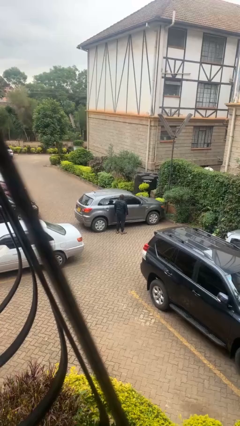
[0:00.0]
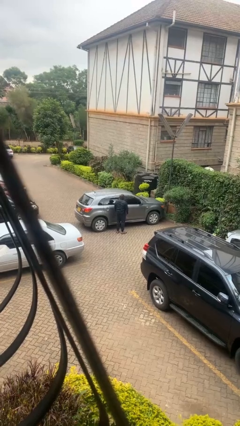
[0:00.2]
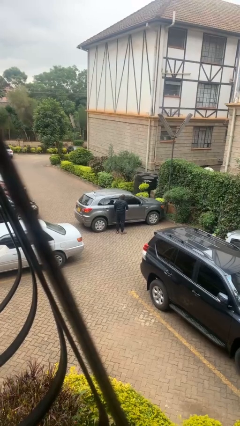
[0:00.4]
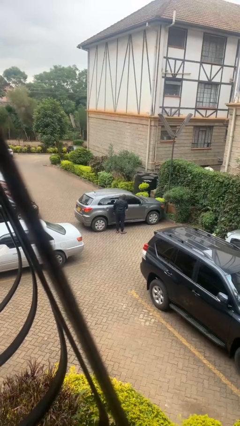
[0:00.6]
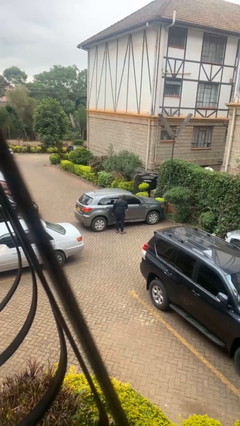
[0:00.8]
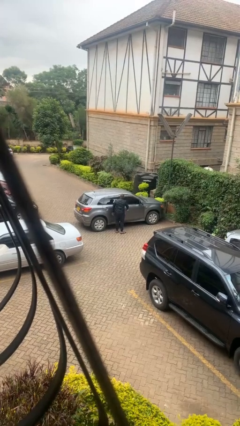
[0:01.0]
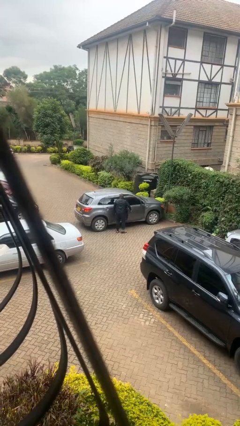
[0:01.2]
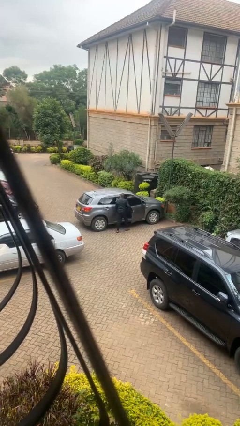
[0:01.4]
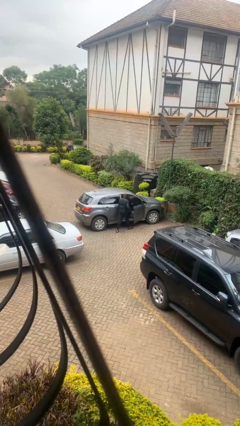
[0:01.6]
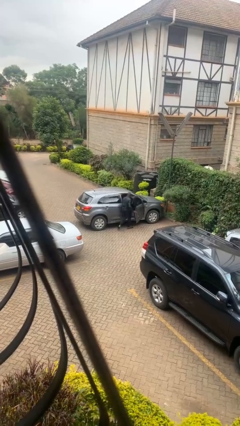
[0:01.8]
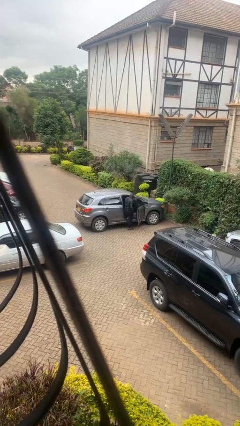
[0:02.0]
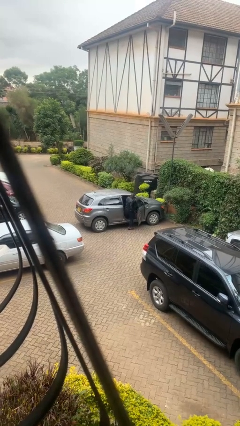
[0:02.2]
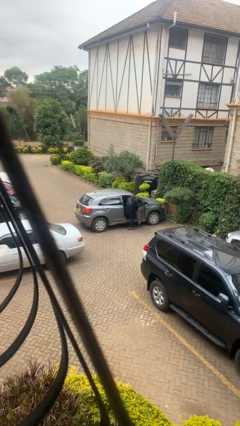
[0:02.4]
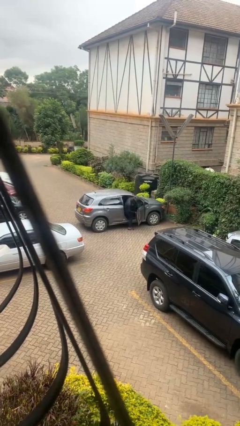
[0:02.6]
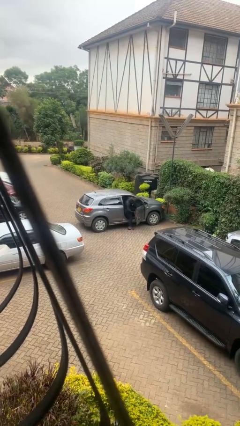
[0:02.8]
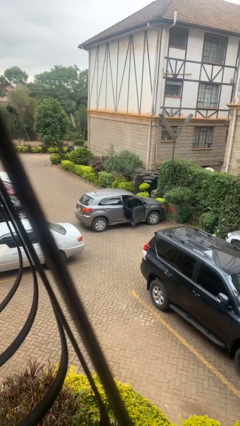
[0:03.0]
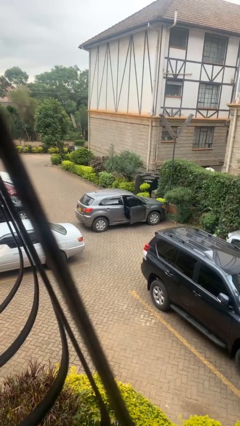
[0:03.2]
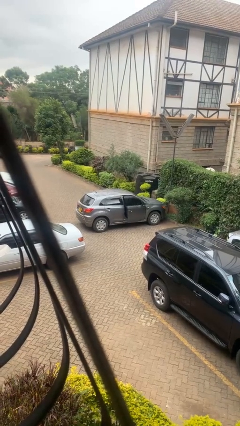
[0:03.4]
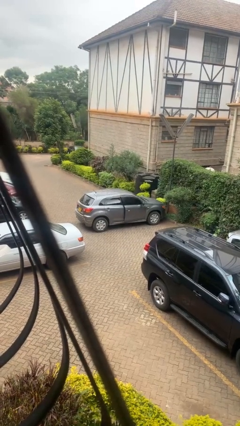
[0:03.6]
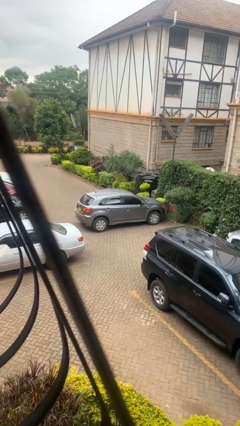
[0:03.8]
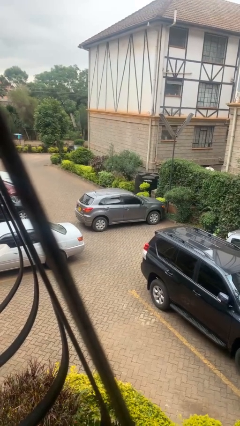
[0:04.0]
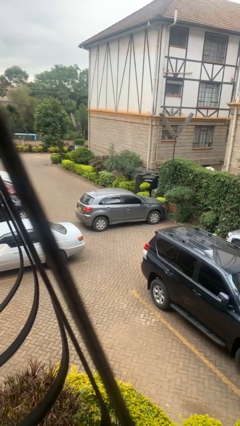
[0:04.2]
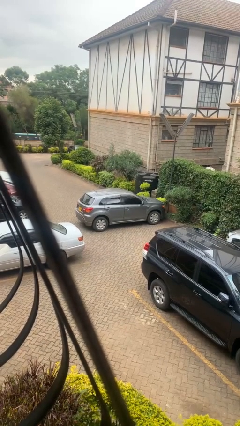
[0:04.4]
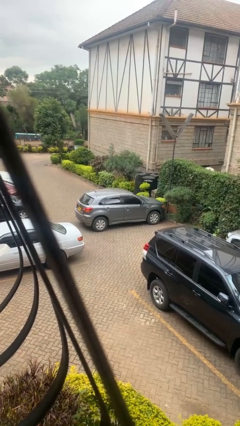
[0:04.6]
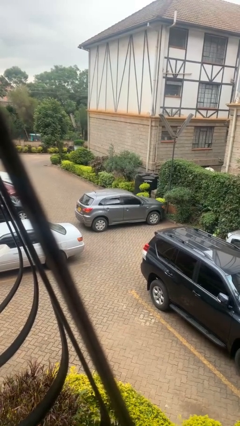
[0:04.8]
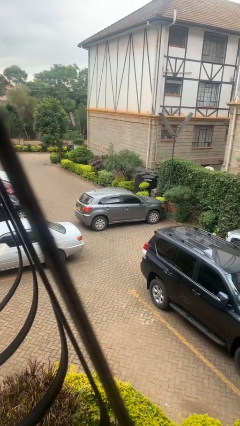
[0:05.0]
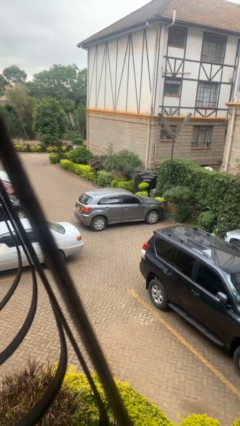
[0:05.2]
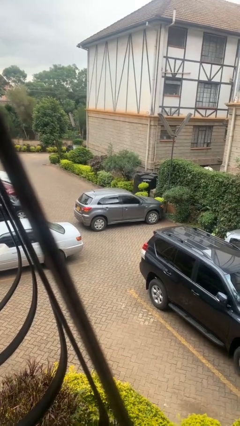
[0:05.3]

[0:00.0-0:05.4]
car picks up person

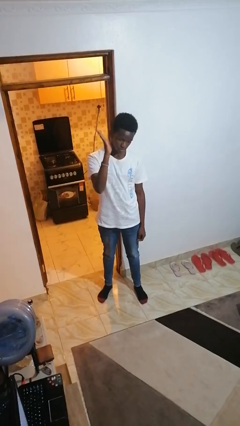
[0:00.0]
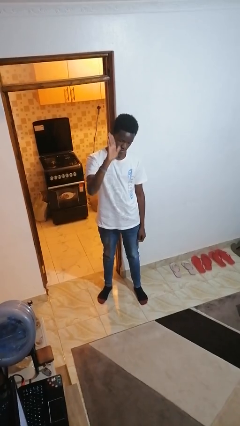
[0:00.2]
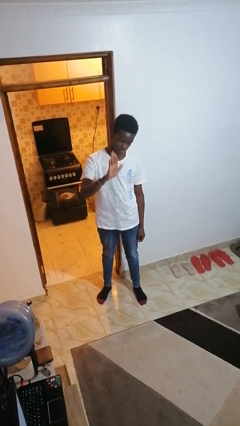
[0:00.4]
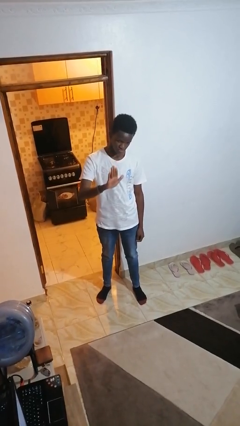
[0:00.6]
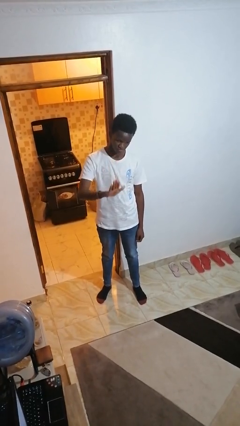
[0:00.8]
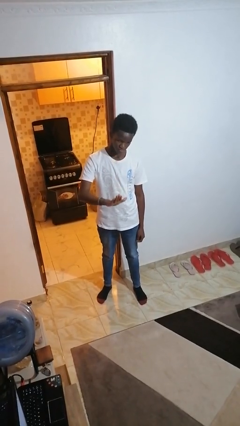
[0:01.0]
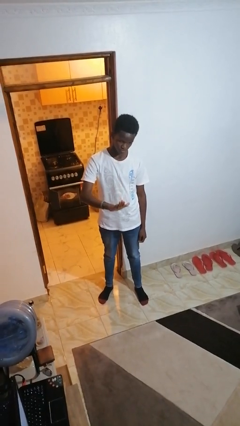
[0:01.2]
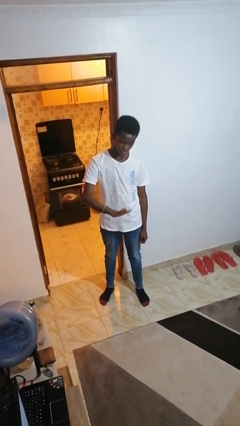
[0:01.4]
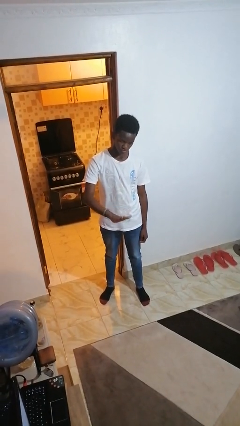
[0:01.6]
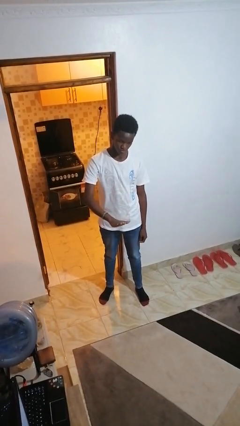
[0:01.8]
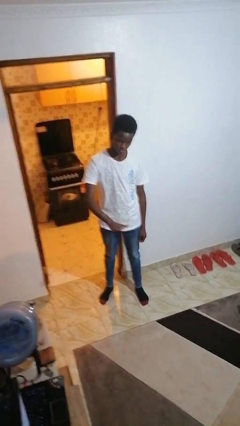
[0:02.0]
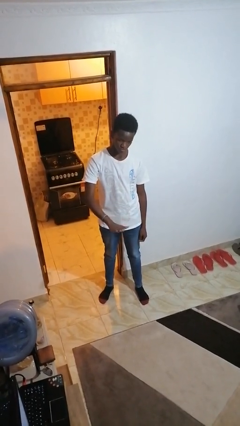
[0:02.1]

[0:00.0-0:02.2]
person gestures swipe down

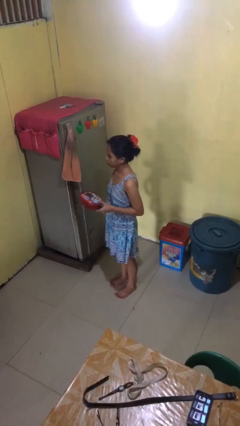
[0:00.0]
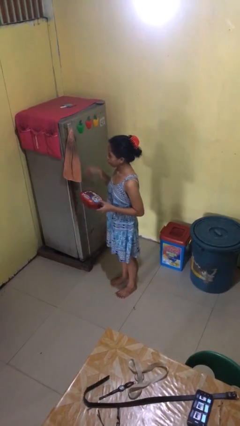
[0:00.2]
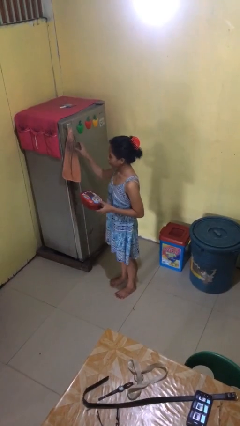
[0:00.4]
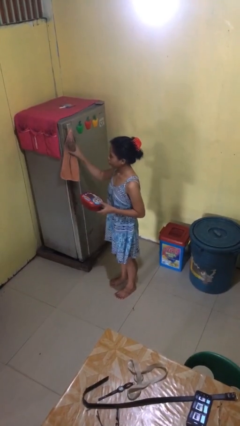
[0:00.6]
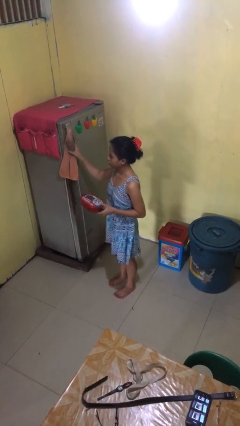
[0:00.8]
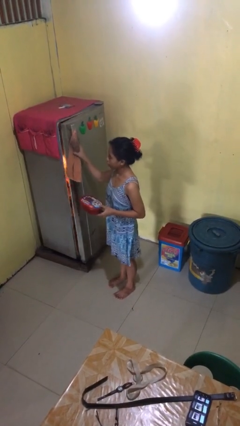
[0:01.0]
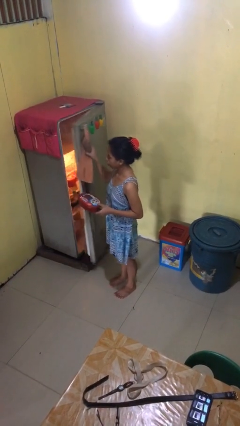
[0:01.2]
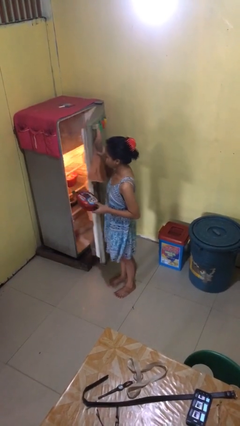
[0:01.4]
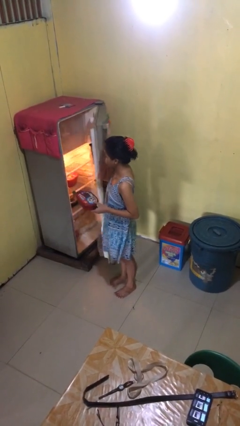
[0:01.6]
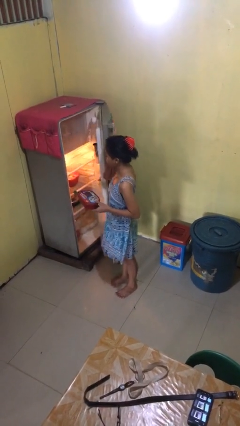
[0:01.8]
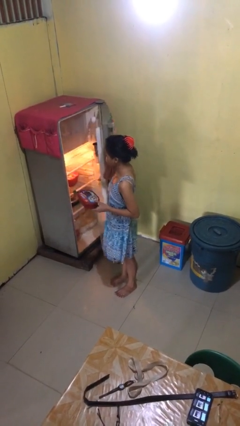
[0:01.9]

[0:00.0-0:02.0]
person opens refrigerator

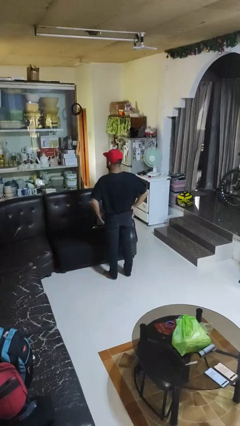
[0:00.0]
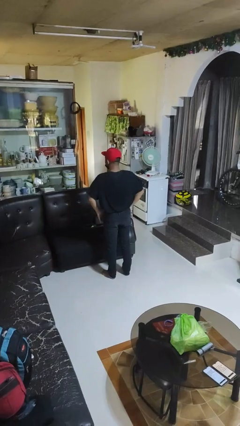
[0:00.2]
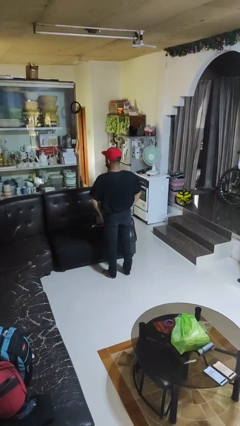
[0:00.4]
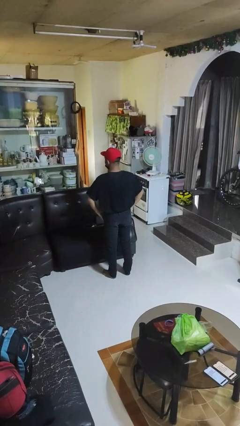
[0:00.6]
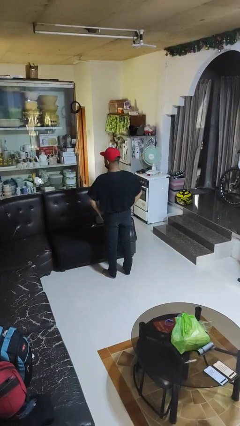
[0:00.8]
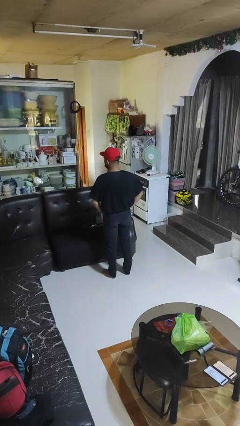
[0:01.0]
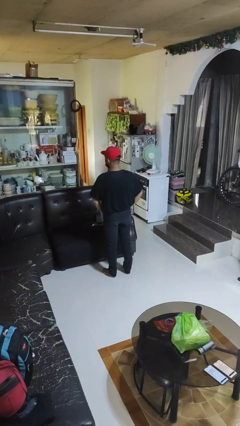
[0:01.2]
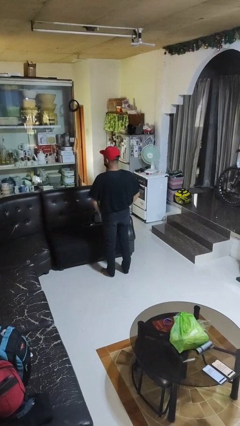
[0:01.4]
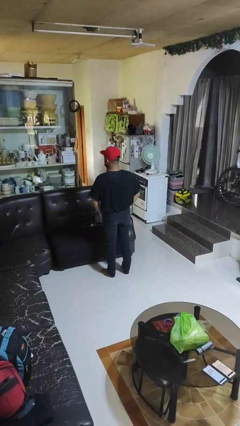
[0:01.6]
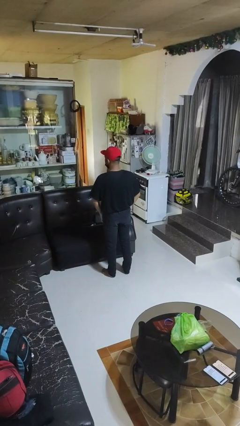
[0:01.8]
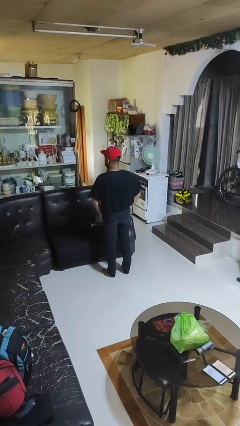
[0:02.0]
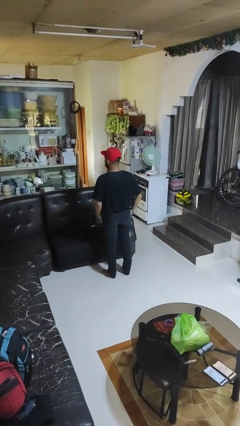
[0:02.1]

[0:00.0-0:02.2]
person puts hands in back pockets

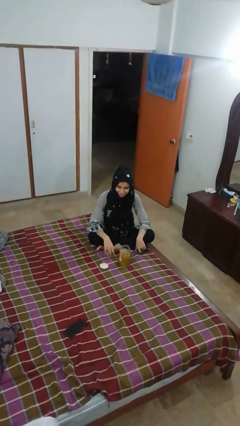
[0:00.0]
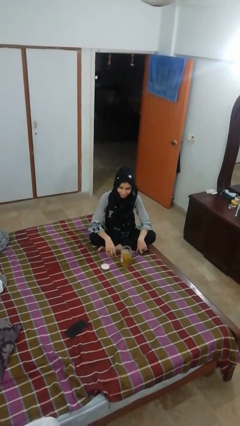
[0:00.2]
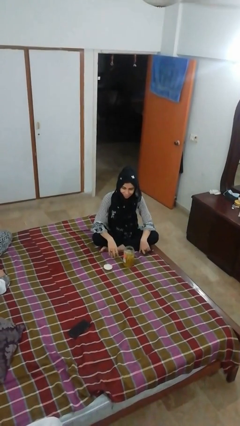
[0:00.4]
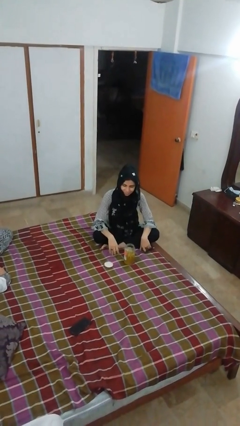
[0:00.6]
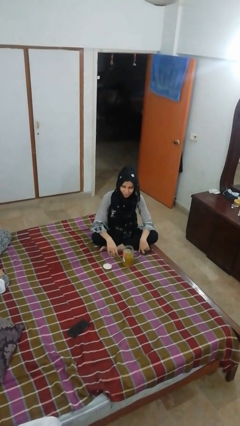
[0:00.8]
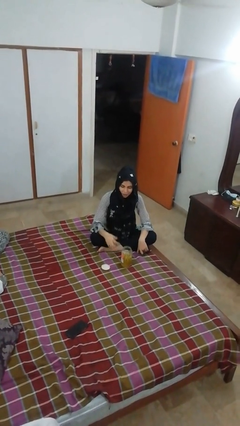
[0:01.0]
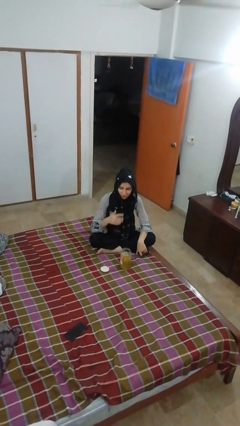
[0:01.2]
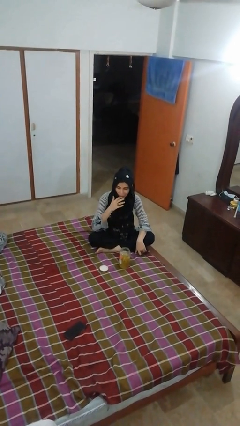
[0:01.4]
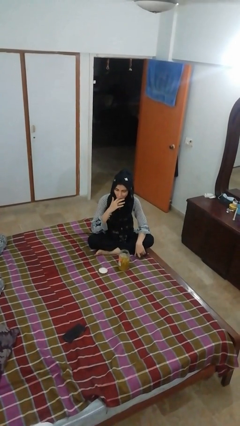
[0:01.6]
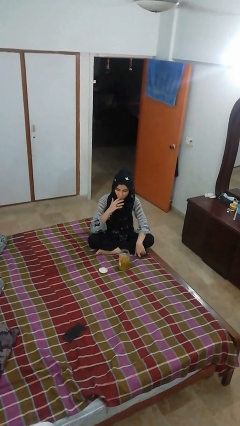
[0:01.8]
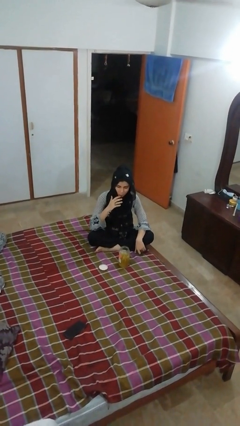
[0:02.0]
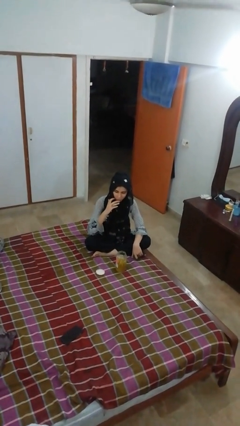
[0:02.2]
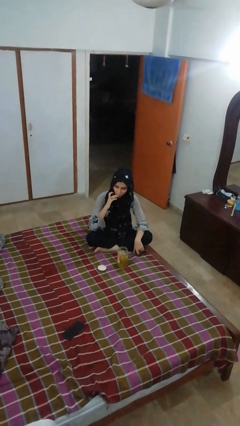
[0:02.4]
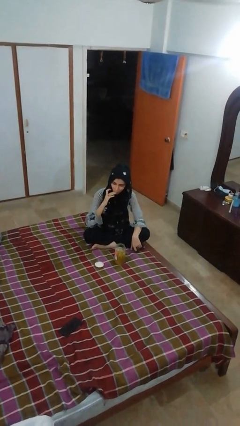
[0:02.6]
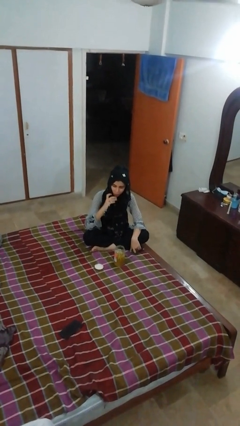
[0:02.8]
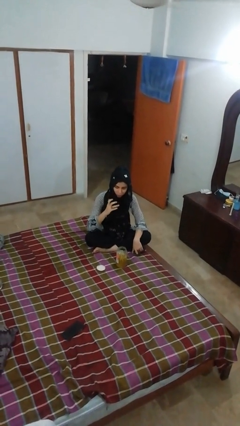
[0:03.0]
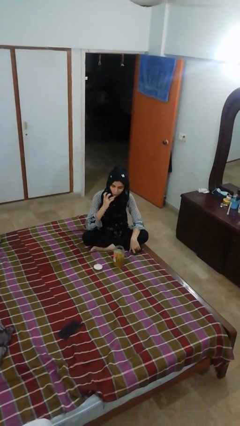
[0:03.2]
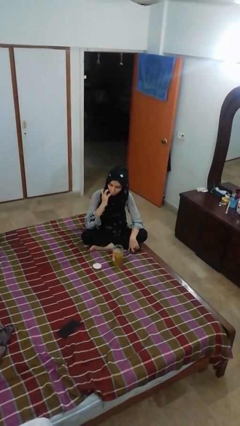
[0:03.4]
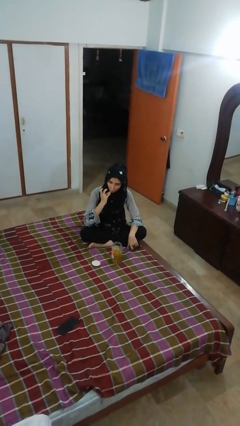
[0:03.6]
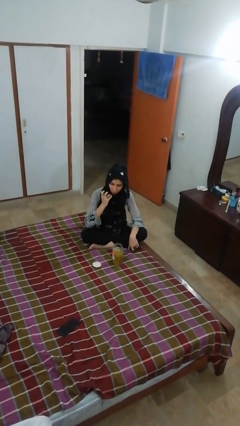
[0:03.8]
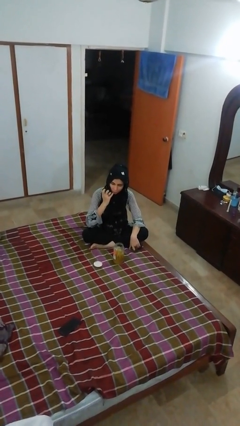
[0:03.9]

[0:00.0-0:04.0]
person licks fingers

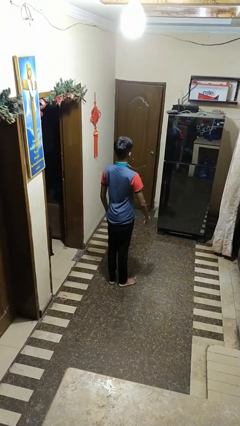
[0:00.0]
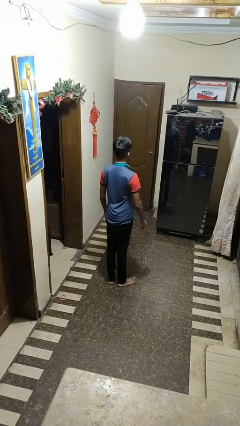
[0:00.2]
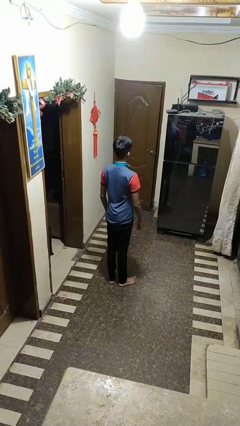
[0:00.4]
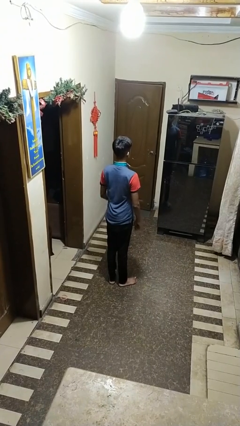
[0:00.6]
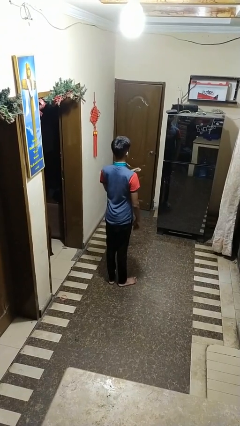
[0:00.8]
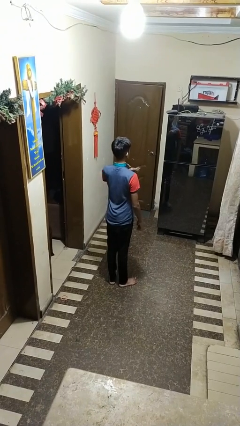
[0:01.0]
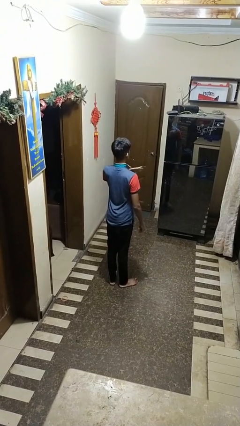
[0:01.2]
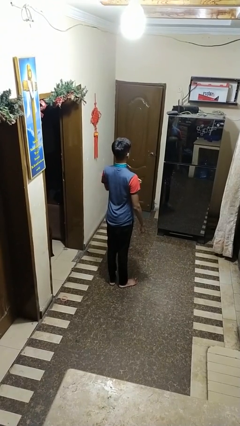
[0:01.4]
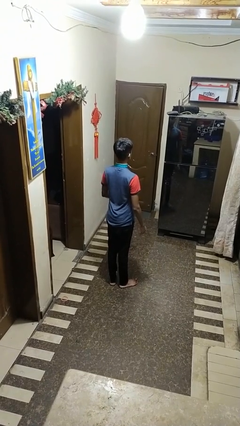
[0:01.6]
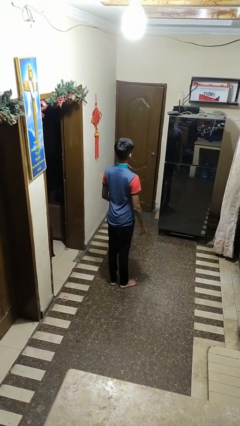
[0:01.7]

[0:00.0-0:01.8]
person drums on chest
